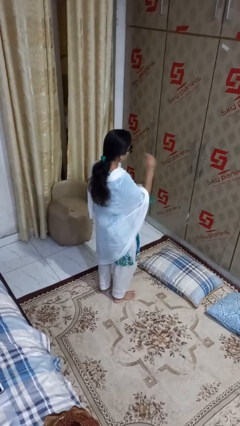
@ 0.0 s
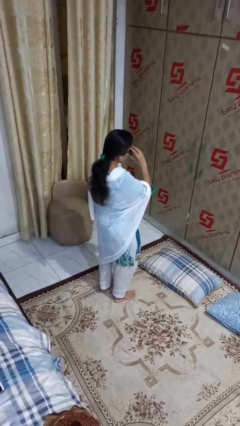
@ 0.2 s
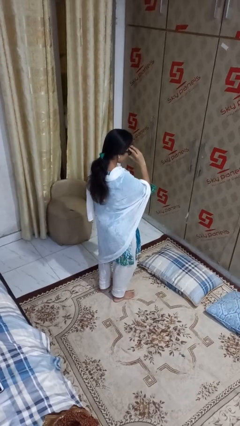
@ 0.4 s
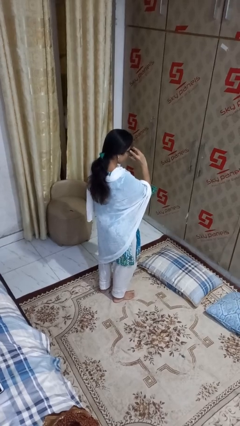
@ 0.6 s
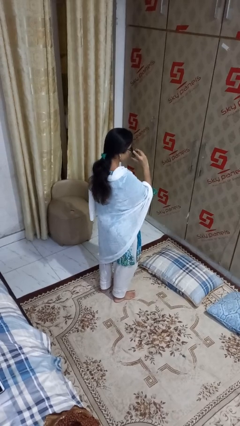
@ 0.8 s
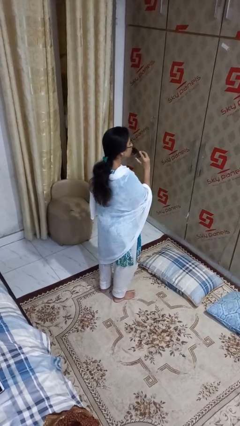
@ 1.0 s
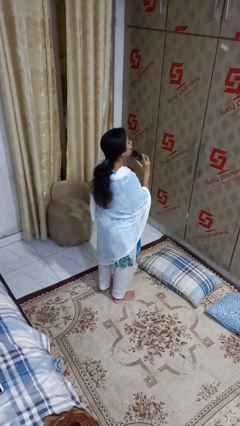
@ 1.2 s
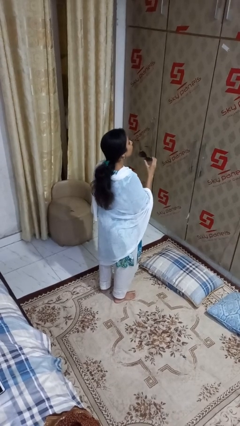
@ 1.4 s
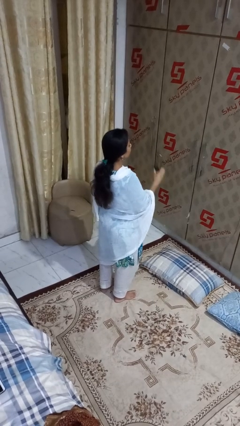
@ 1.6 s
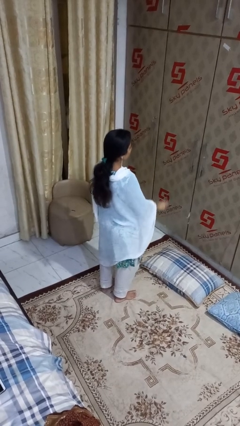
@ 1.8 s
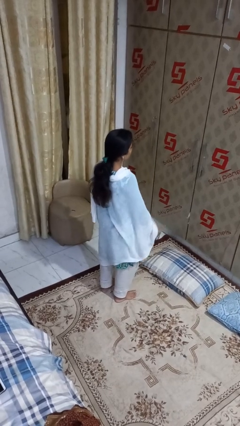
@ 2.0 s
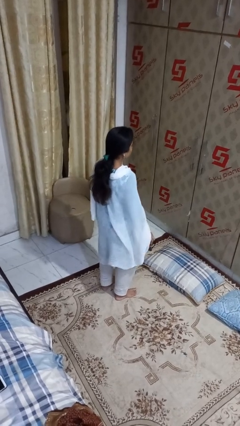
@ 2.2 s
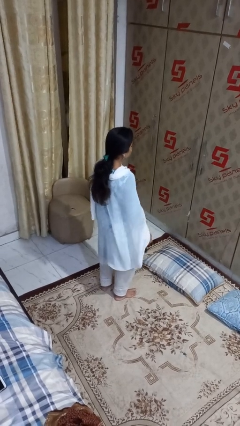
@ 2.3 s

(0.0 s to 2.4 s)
person takes off sunglasses

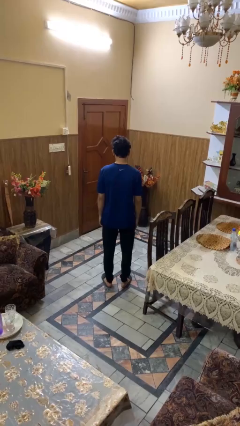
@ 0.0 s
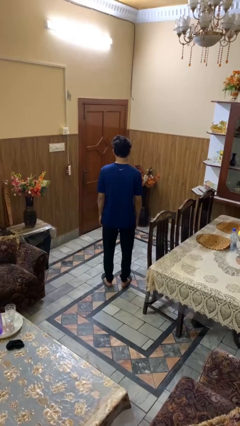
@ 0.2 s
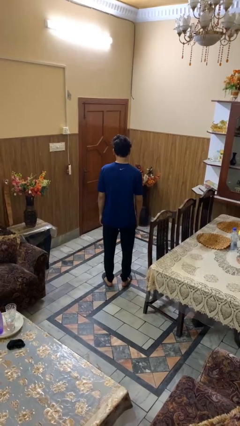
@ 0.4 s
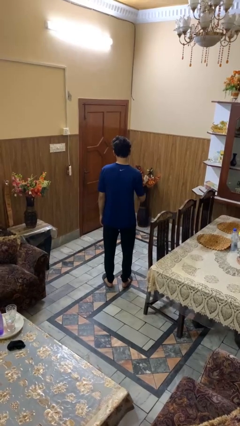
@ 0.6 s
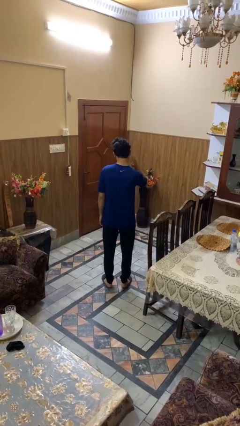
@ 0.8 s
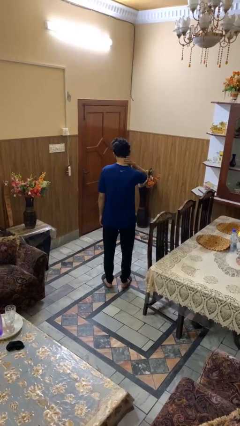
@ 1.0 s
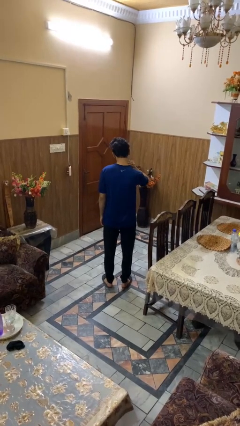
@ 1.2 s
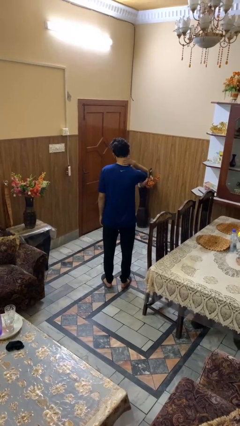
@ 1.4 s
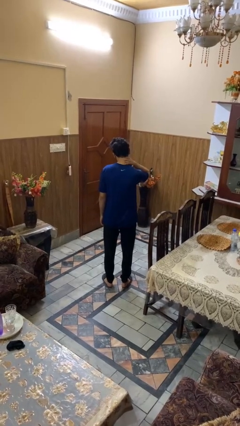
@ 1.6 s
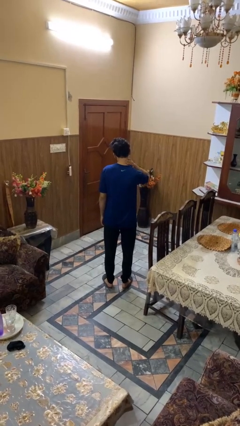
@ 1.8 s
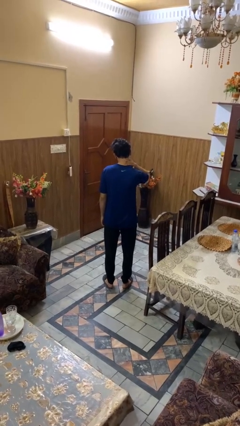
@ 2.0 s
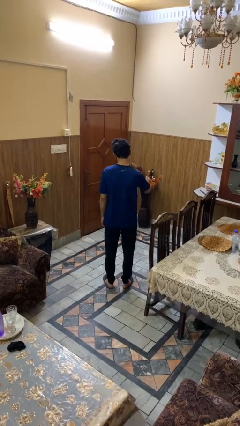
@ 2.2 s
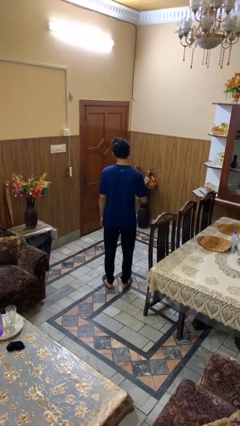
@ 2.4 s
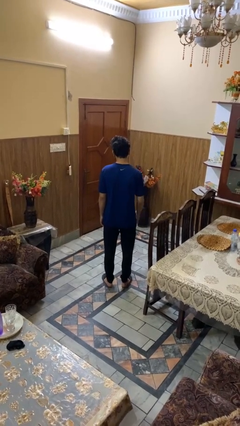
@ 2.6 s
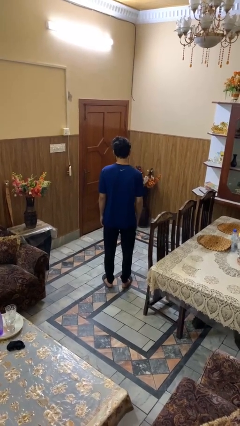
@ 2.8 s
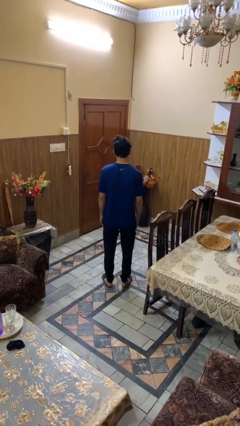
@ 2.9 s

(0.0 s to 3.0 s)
person rubs neck

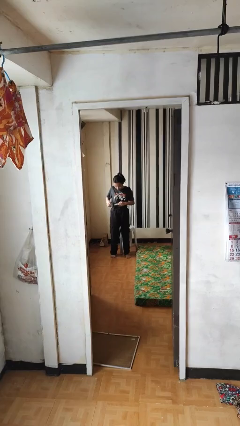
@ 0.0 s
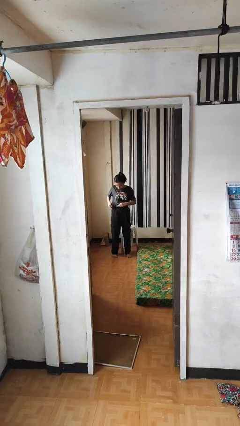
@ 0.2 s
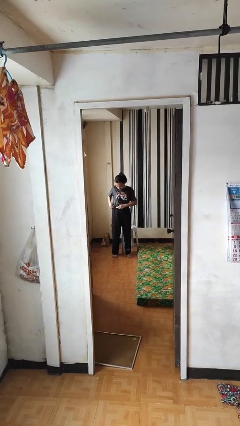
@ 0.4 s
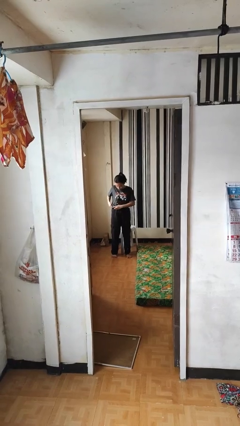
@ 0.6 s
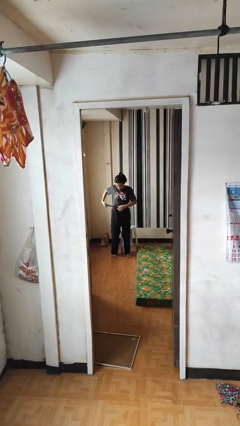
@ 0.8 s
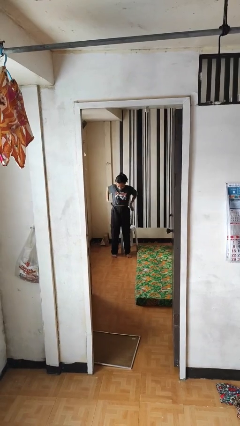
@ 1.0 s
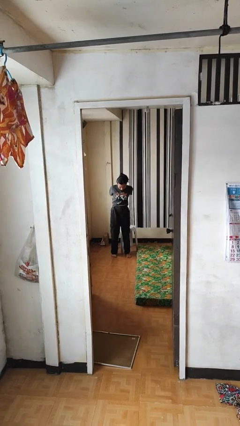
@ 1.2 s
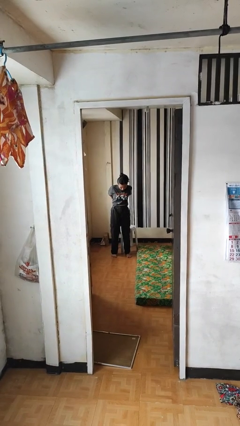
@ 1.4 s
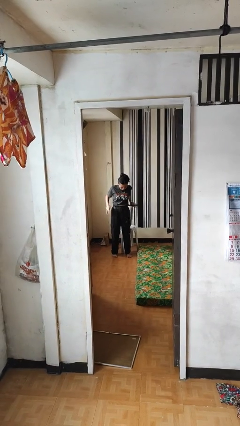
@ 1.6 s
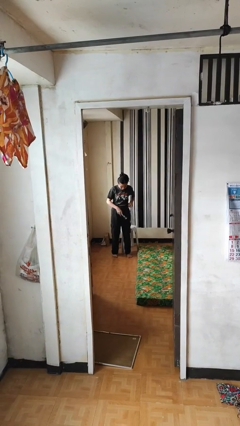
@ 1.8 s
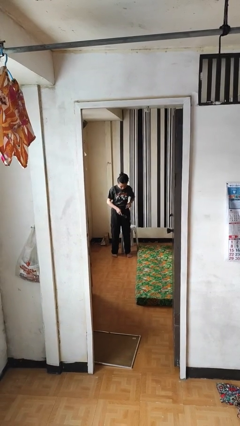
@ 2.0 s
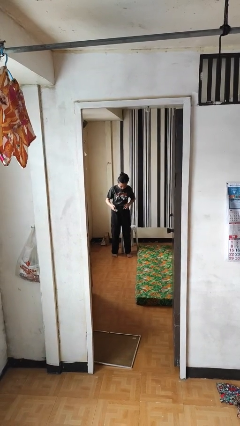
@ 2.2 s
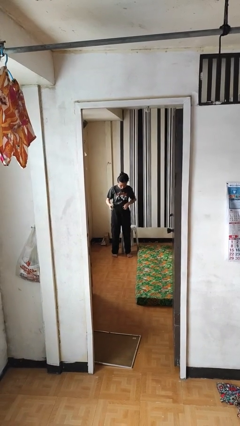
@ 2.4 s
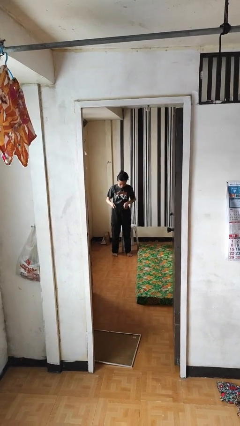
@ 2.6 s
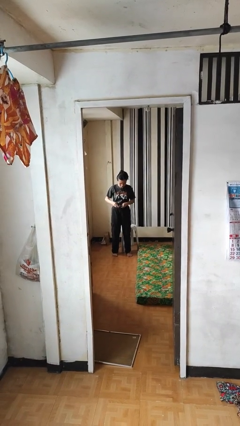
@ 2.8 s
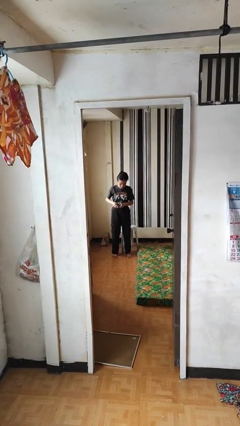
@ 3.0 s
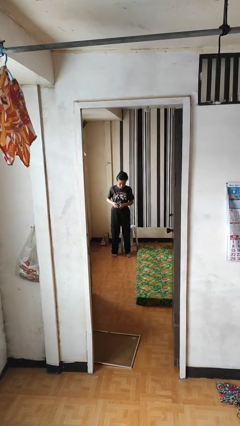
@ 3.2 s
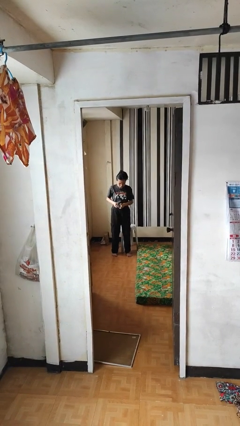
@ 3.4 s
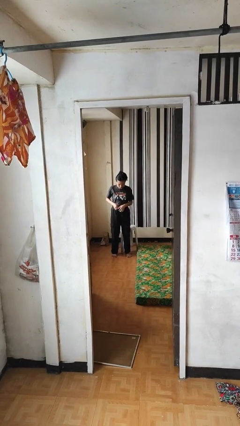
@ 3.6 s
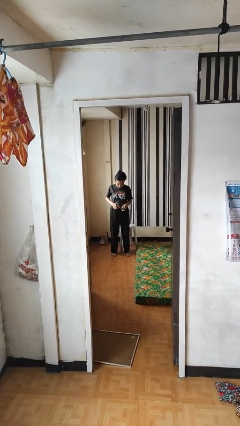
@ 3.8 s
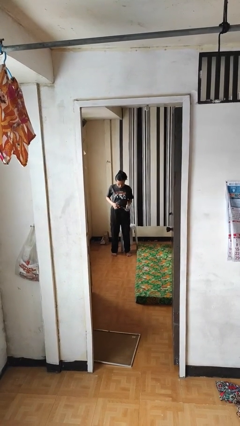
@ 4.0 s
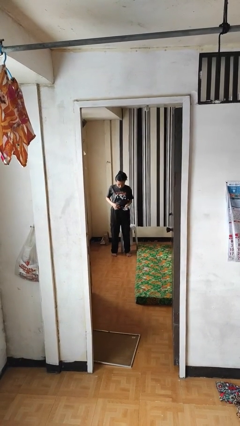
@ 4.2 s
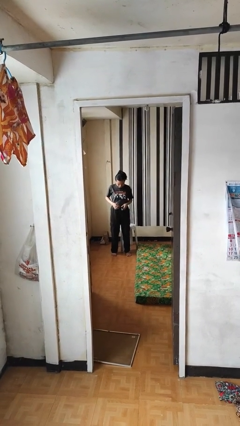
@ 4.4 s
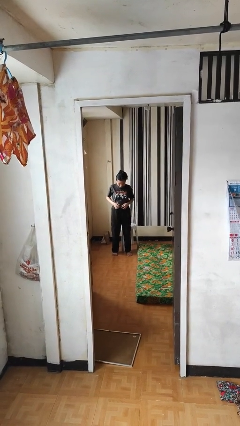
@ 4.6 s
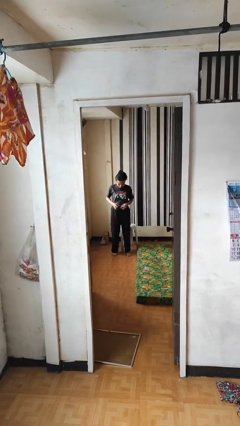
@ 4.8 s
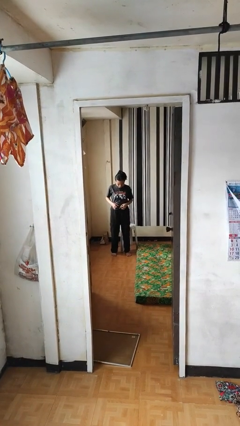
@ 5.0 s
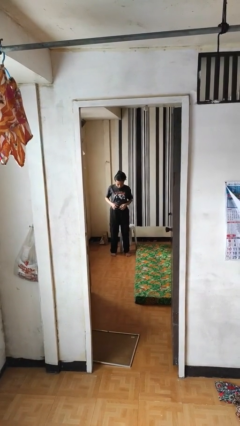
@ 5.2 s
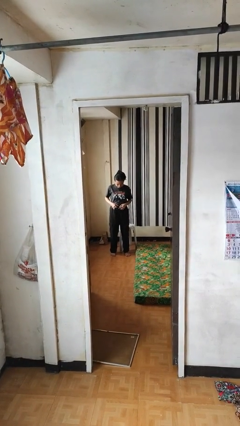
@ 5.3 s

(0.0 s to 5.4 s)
person puts on belt

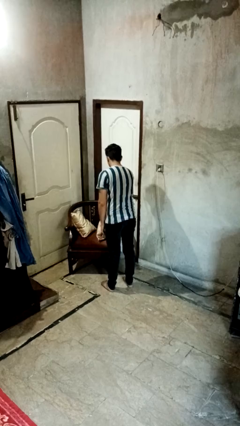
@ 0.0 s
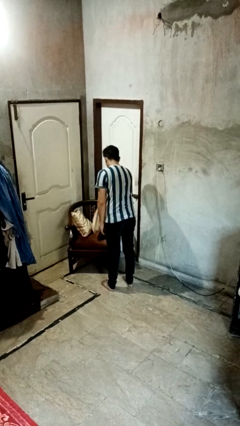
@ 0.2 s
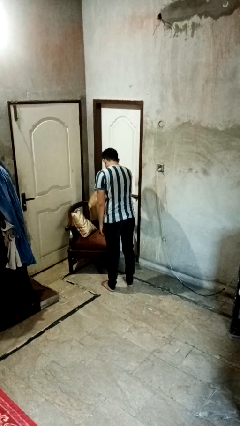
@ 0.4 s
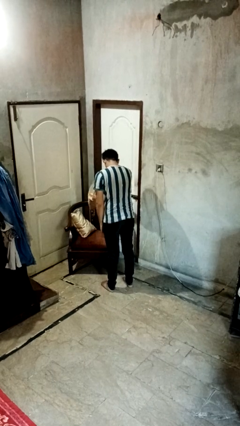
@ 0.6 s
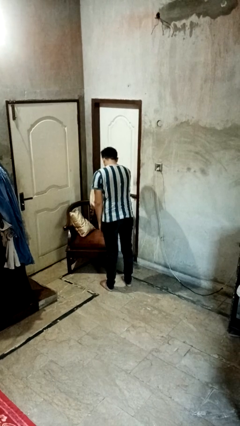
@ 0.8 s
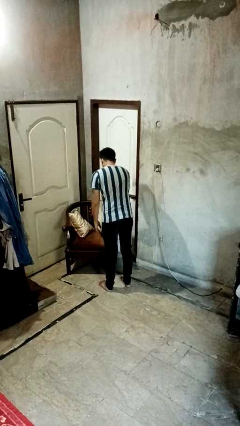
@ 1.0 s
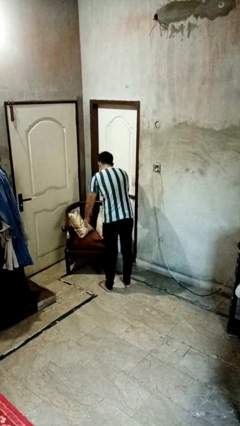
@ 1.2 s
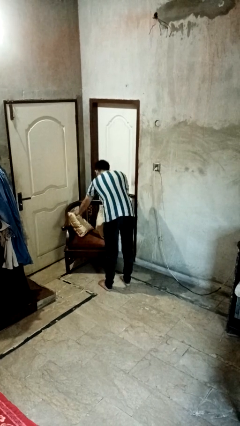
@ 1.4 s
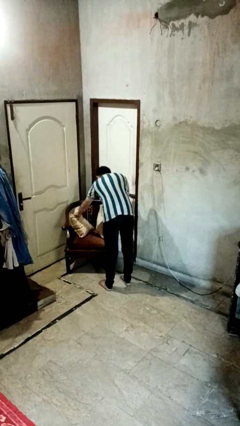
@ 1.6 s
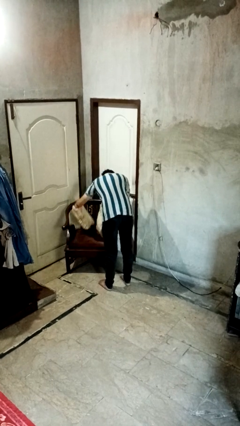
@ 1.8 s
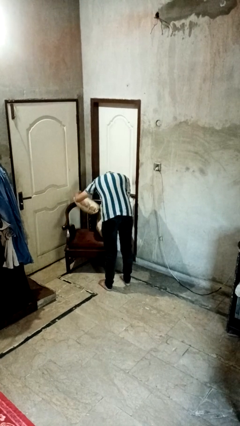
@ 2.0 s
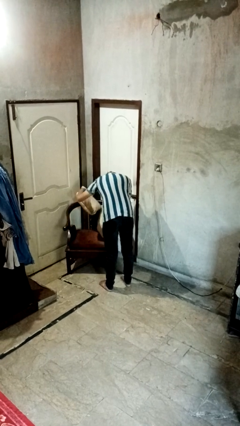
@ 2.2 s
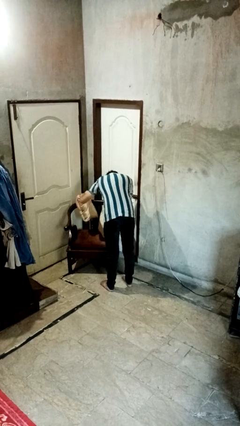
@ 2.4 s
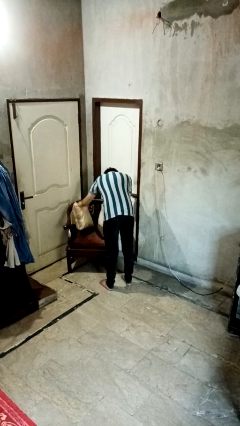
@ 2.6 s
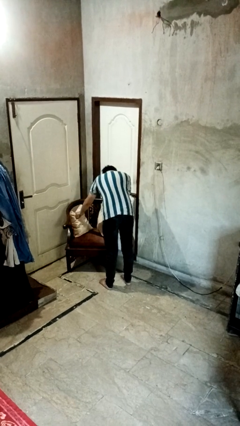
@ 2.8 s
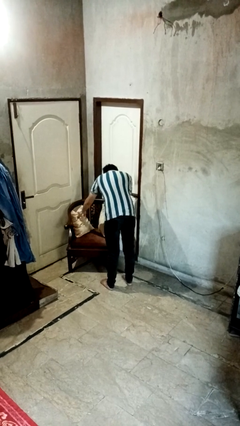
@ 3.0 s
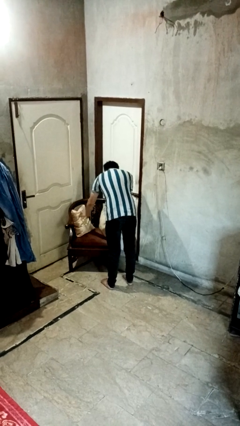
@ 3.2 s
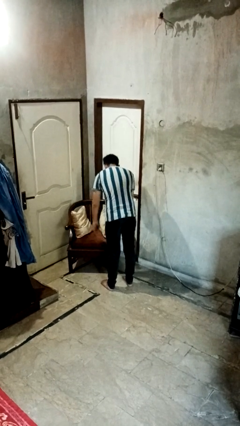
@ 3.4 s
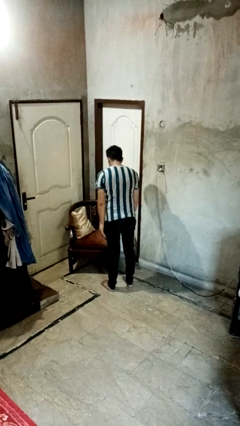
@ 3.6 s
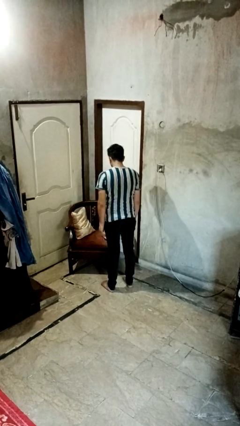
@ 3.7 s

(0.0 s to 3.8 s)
person searches in couch

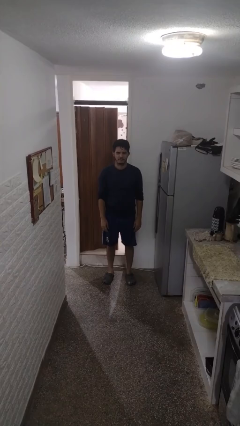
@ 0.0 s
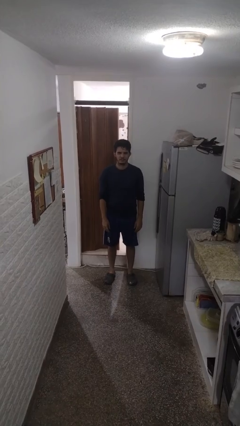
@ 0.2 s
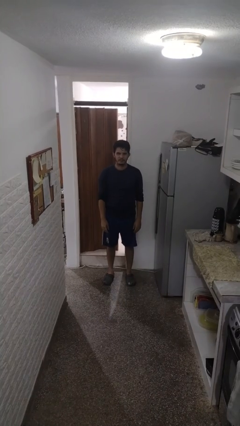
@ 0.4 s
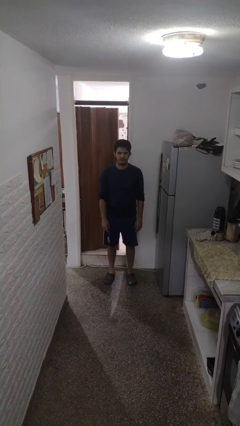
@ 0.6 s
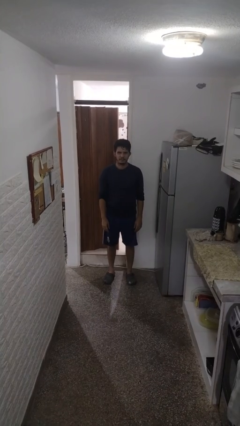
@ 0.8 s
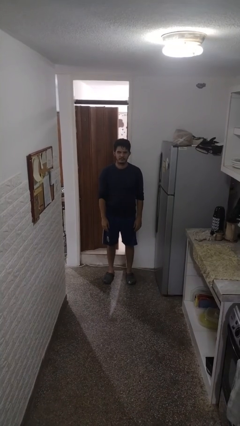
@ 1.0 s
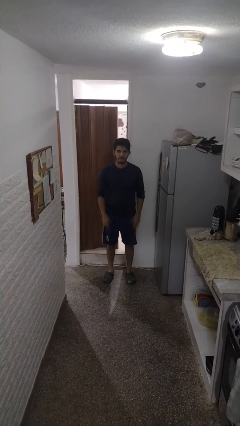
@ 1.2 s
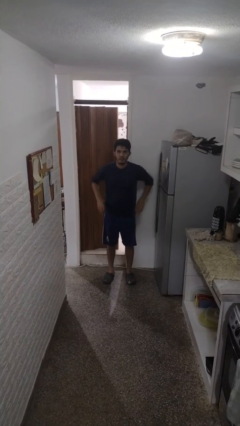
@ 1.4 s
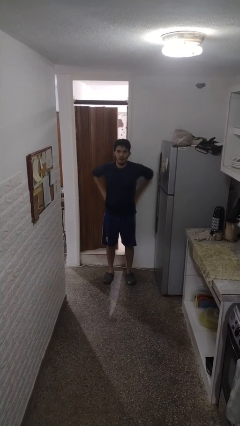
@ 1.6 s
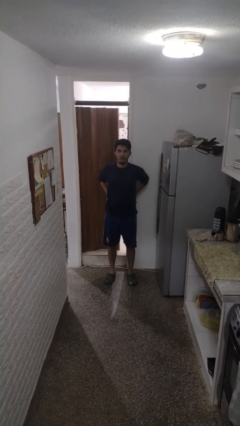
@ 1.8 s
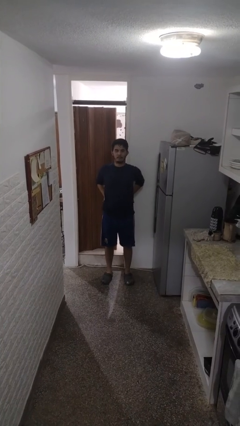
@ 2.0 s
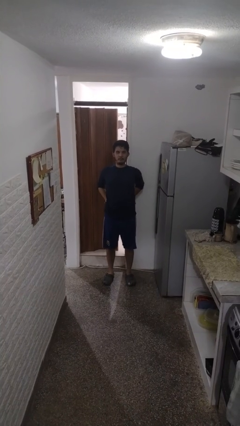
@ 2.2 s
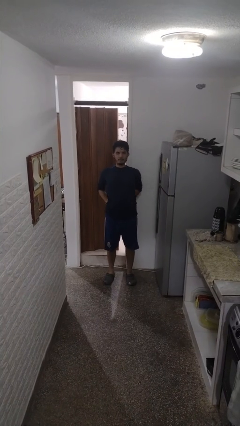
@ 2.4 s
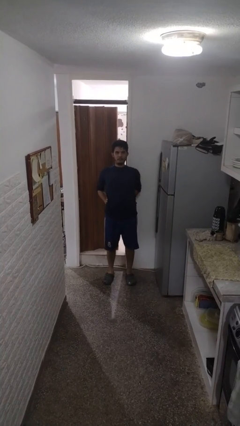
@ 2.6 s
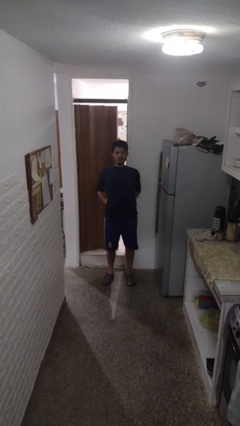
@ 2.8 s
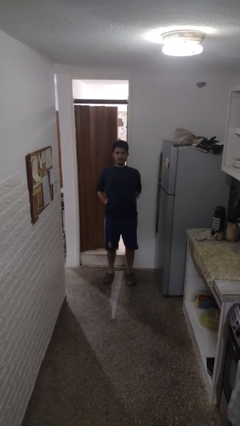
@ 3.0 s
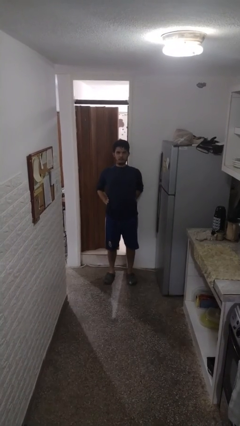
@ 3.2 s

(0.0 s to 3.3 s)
person stretches back
